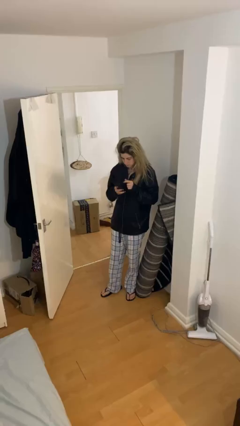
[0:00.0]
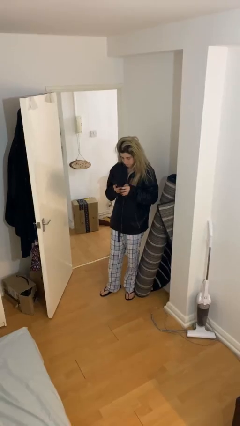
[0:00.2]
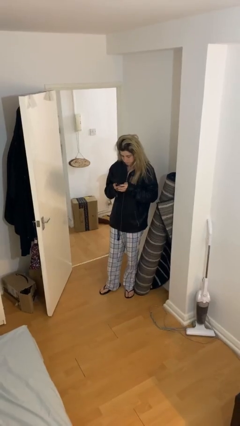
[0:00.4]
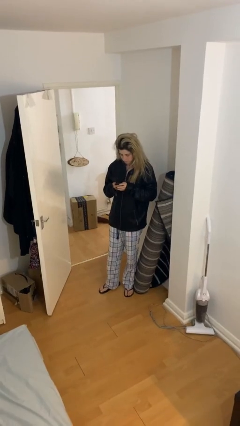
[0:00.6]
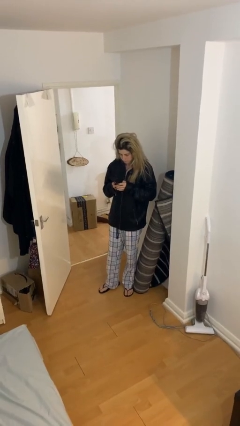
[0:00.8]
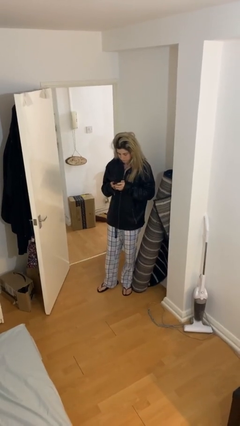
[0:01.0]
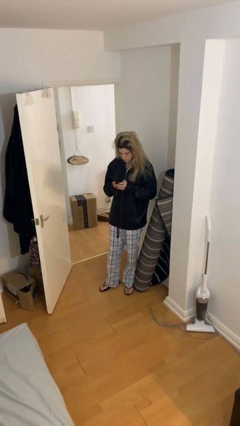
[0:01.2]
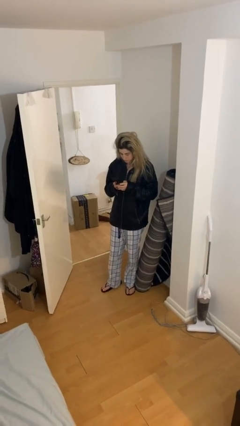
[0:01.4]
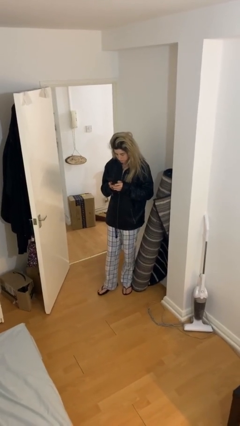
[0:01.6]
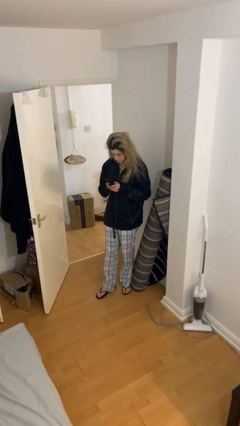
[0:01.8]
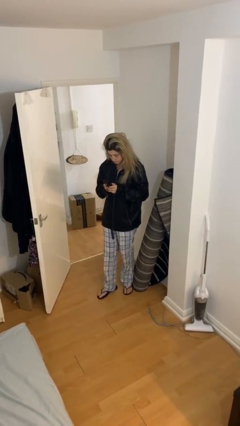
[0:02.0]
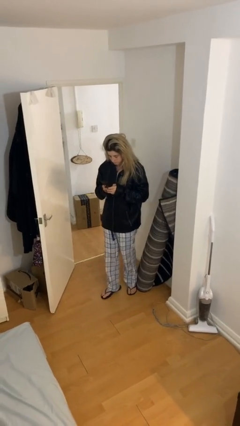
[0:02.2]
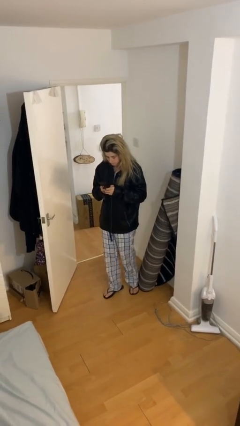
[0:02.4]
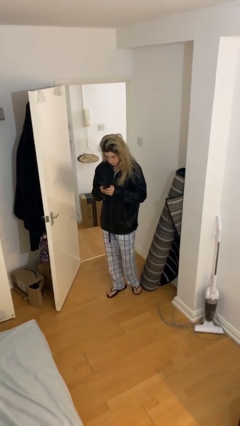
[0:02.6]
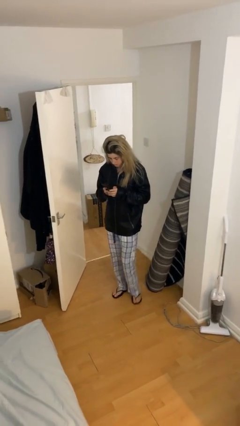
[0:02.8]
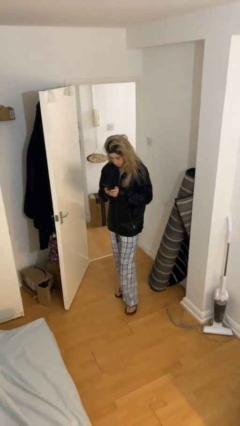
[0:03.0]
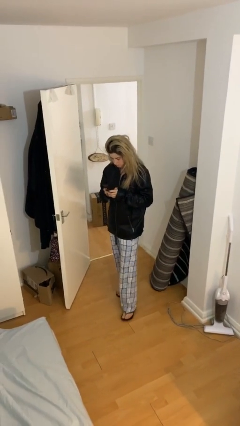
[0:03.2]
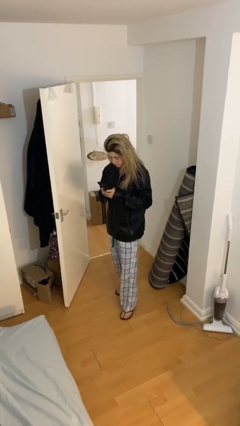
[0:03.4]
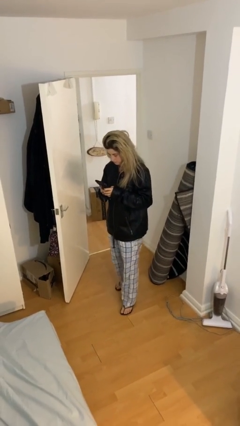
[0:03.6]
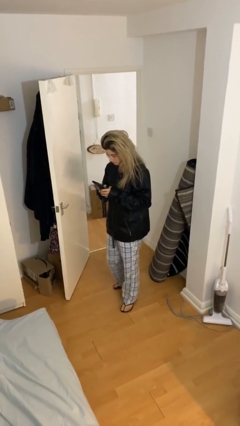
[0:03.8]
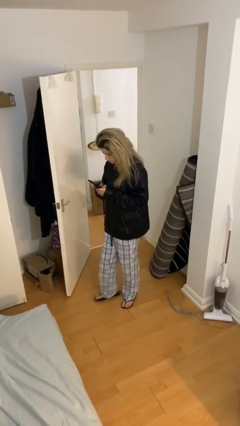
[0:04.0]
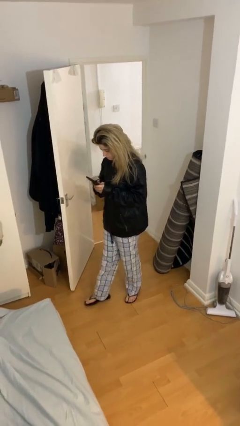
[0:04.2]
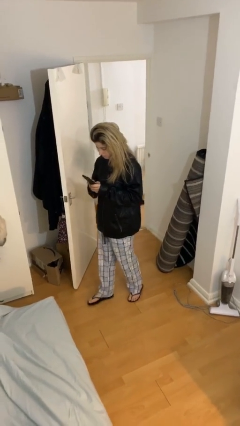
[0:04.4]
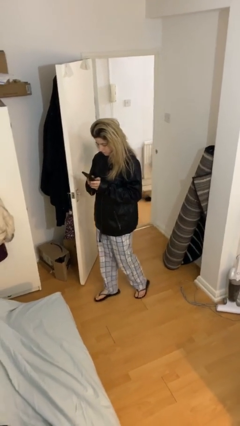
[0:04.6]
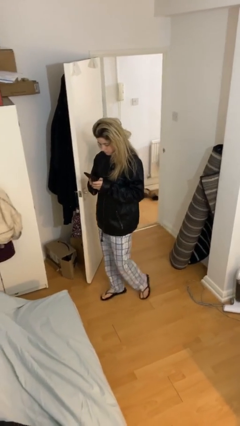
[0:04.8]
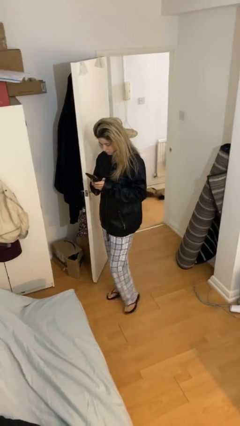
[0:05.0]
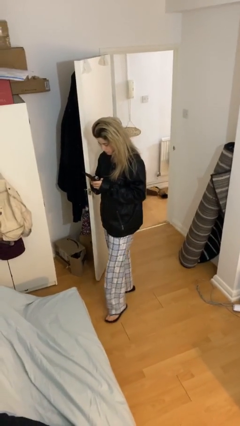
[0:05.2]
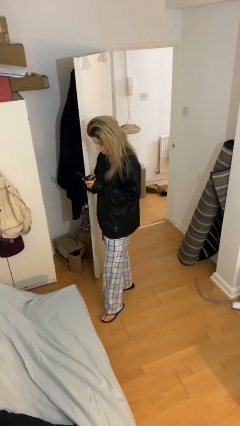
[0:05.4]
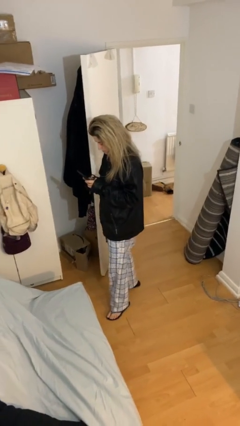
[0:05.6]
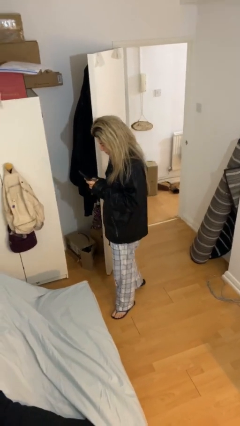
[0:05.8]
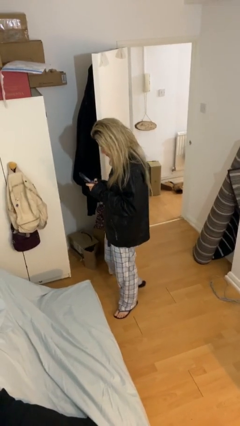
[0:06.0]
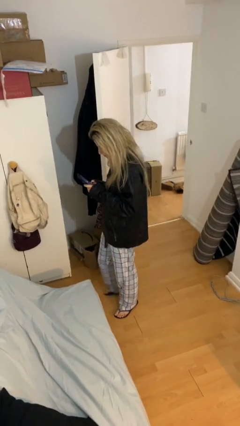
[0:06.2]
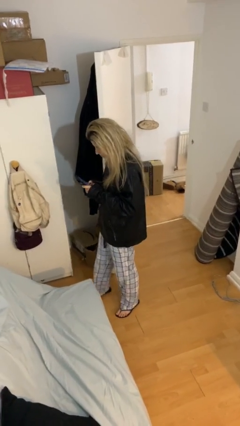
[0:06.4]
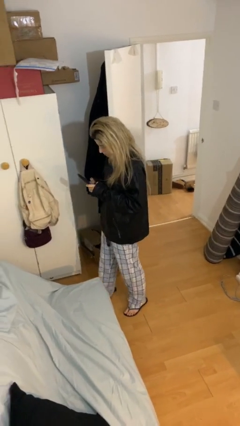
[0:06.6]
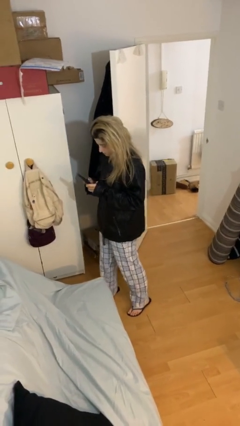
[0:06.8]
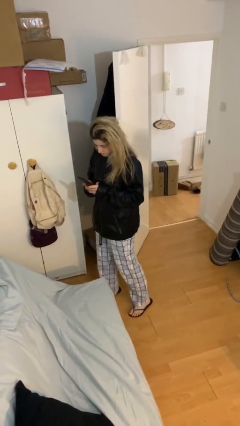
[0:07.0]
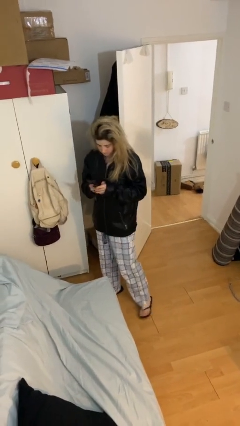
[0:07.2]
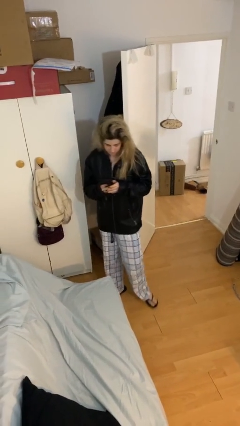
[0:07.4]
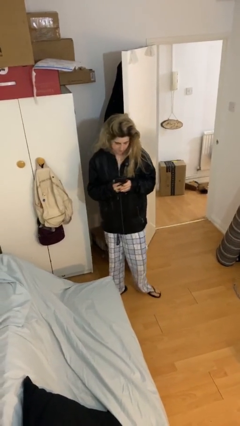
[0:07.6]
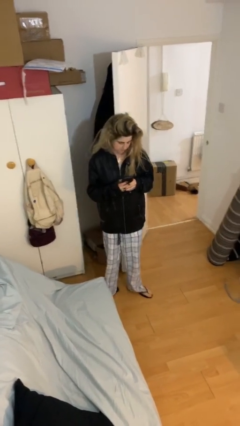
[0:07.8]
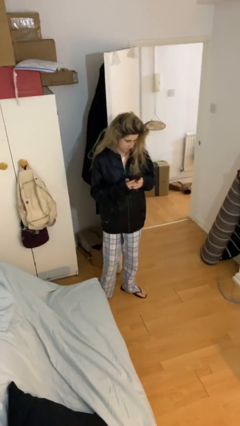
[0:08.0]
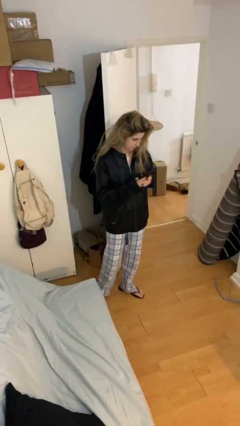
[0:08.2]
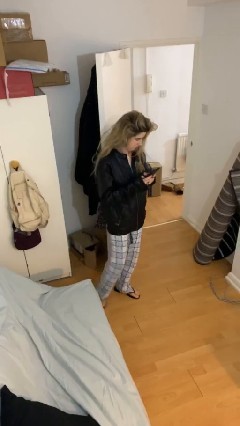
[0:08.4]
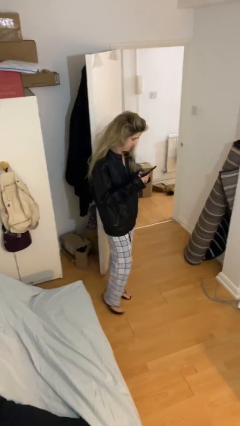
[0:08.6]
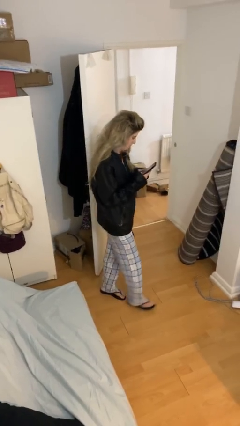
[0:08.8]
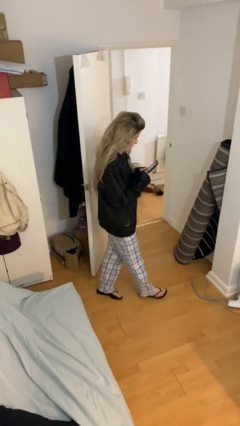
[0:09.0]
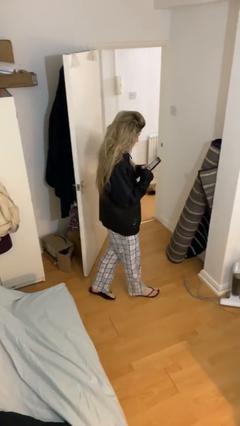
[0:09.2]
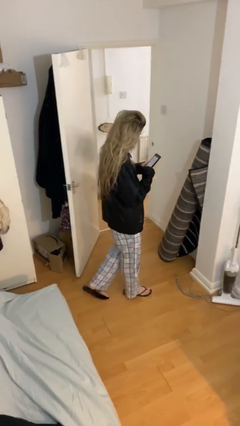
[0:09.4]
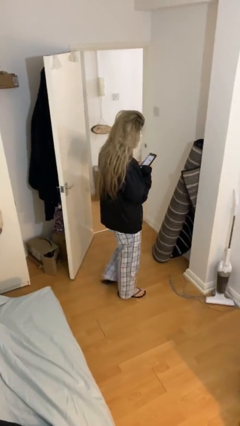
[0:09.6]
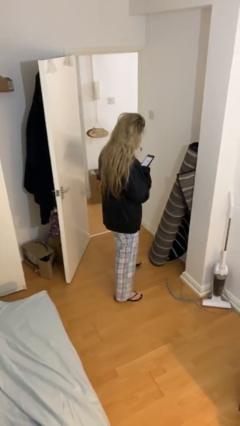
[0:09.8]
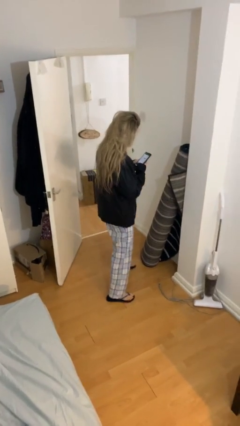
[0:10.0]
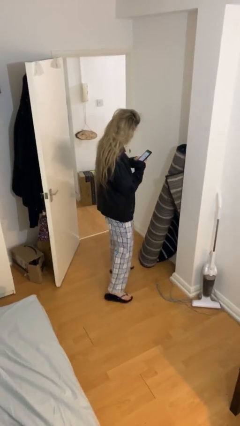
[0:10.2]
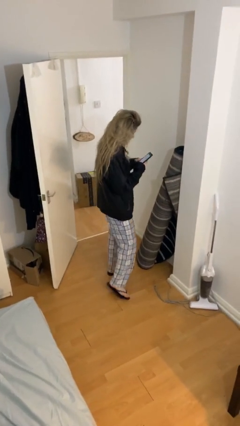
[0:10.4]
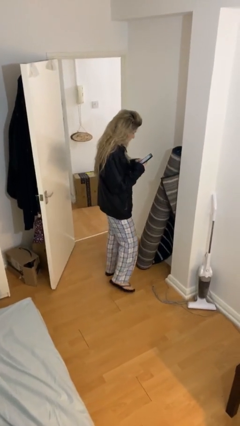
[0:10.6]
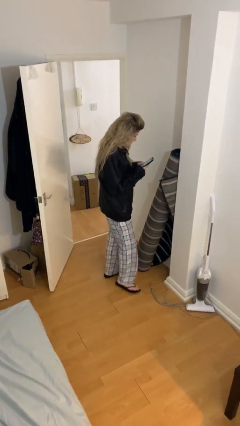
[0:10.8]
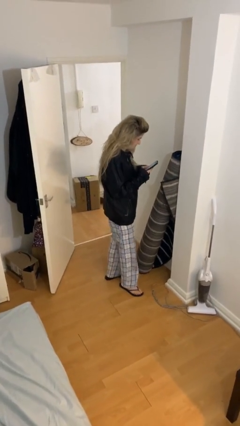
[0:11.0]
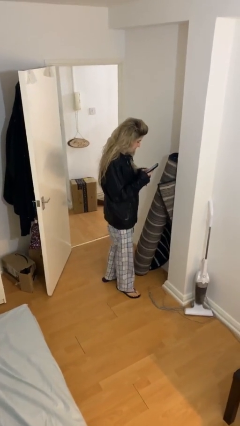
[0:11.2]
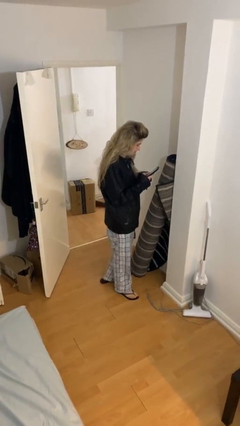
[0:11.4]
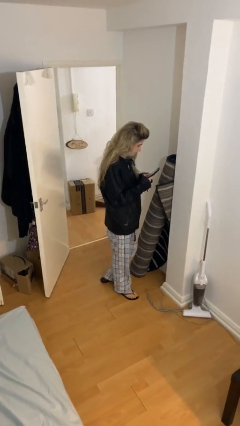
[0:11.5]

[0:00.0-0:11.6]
person texts on phone

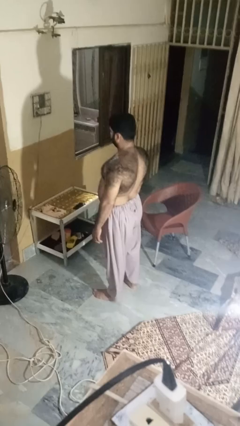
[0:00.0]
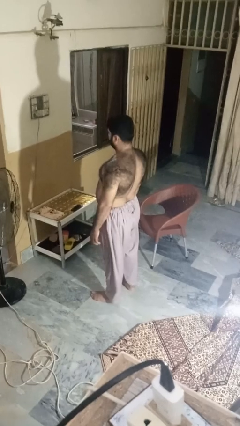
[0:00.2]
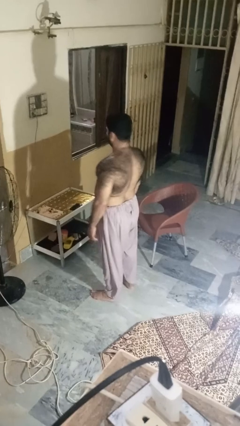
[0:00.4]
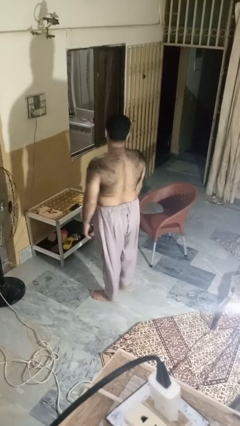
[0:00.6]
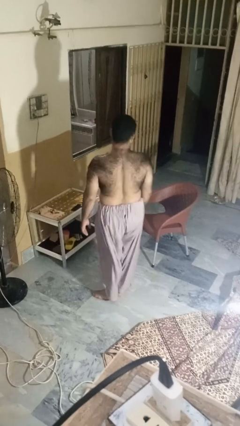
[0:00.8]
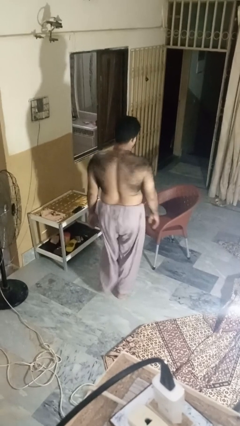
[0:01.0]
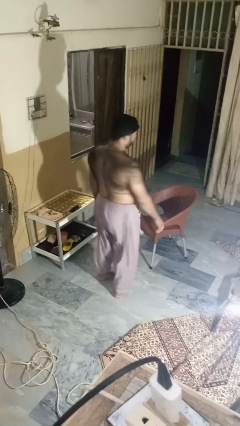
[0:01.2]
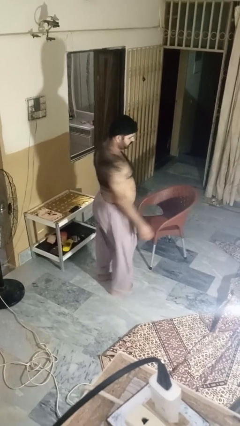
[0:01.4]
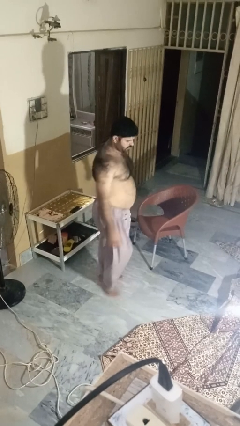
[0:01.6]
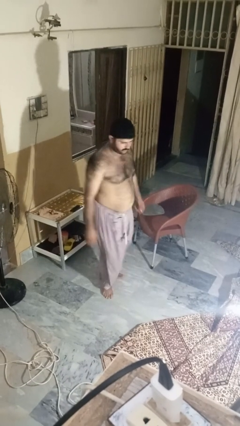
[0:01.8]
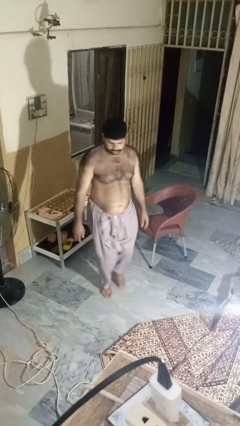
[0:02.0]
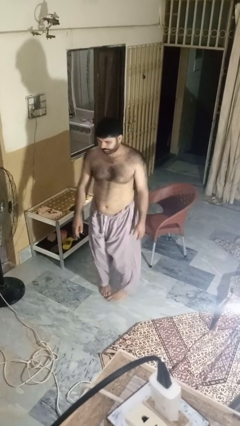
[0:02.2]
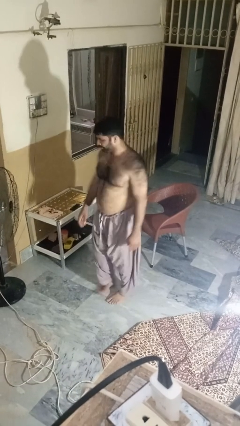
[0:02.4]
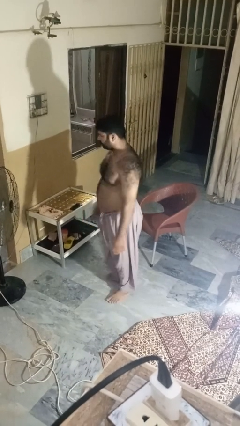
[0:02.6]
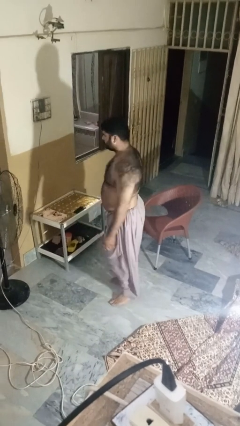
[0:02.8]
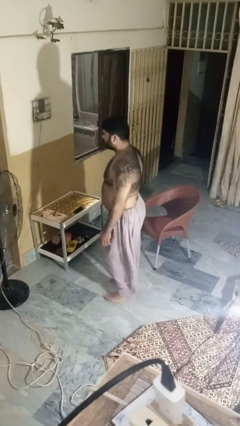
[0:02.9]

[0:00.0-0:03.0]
person twirls

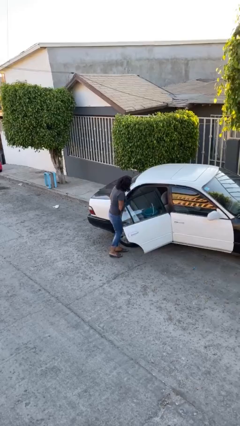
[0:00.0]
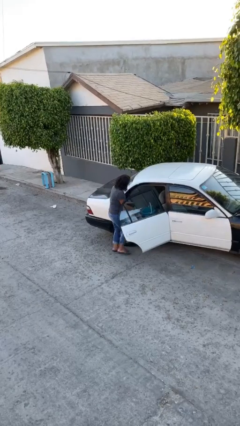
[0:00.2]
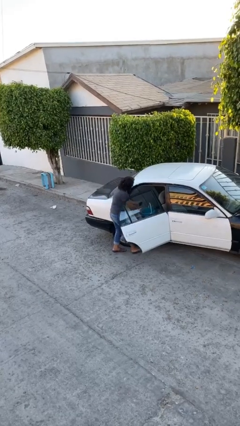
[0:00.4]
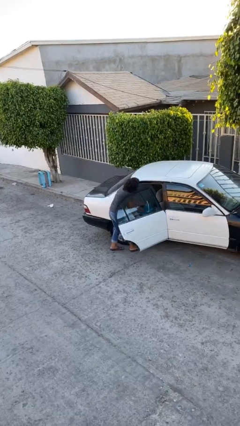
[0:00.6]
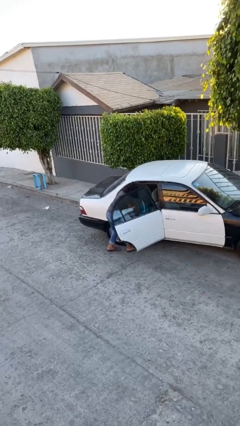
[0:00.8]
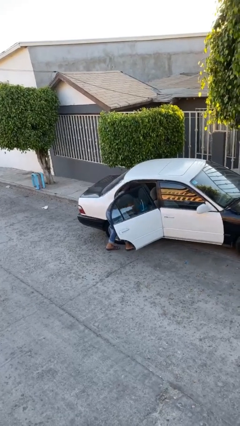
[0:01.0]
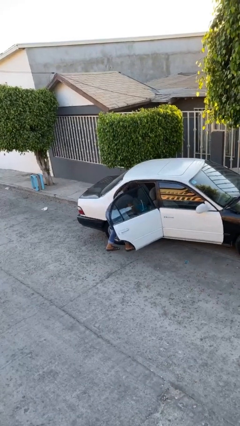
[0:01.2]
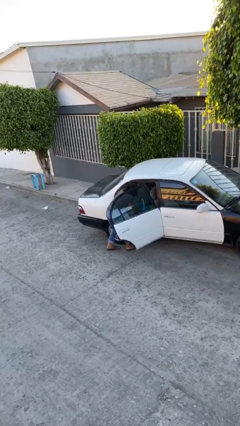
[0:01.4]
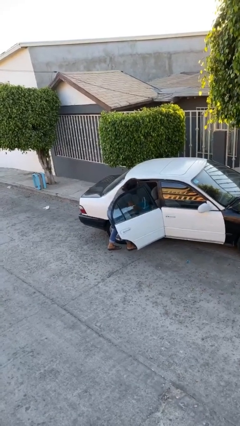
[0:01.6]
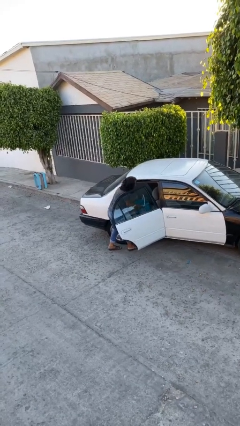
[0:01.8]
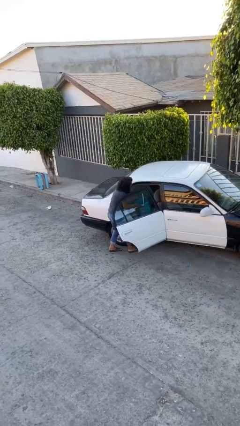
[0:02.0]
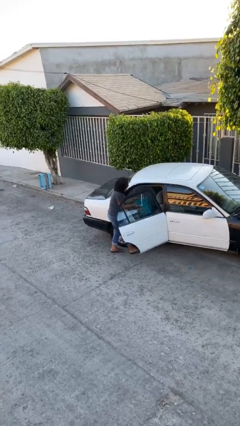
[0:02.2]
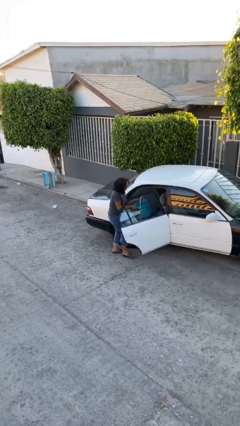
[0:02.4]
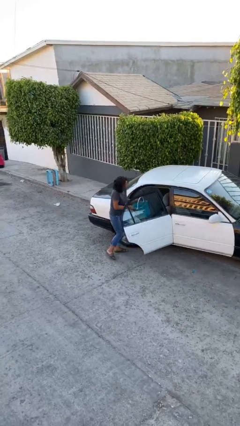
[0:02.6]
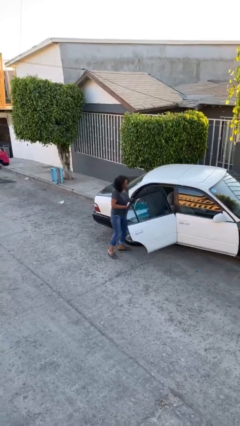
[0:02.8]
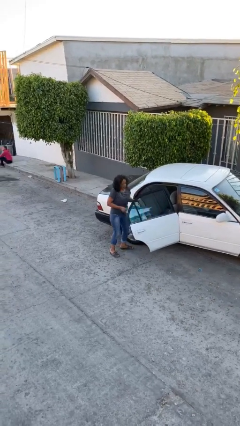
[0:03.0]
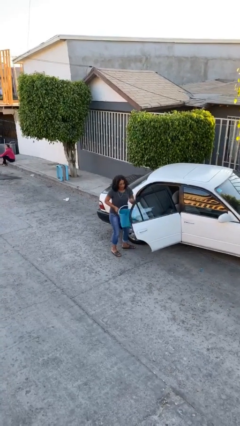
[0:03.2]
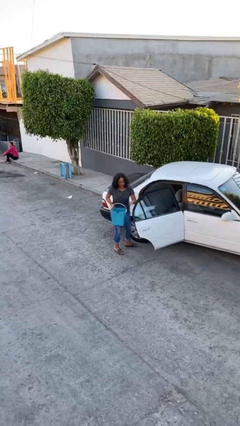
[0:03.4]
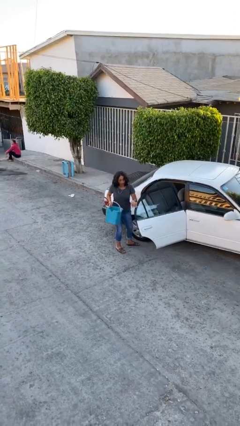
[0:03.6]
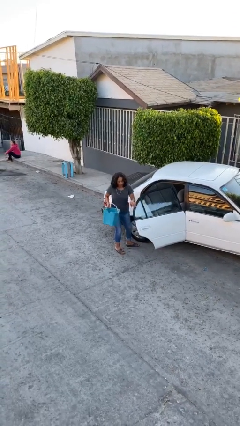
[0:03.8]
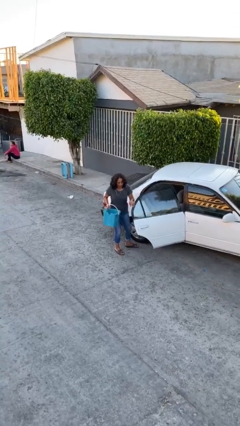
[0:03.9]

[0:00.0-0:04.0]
person unloads car
